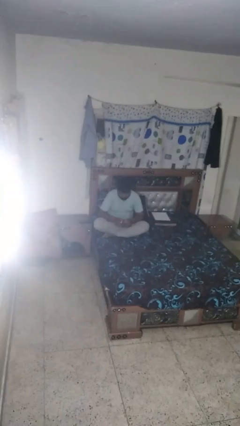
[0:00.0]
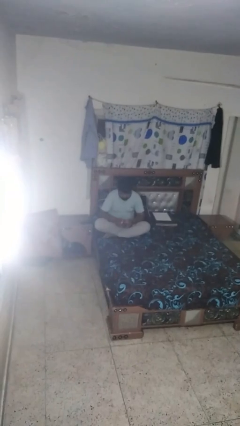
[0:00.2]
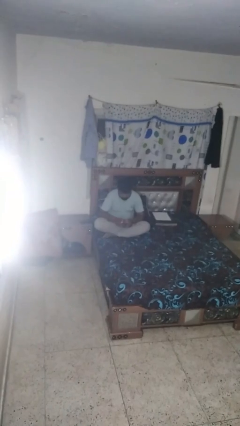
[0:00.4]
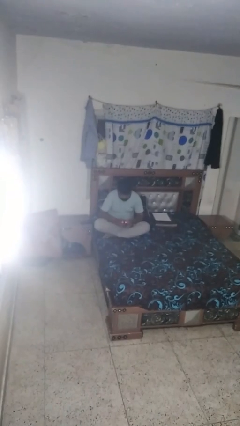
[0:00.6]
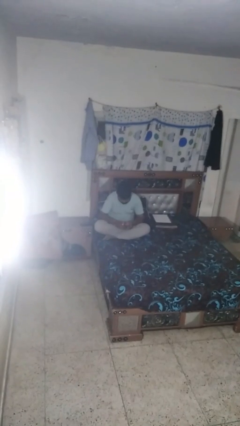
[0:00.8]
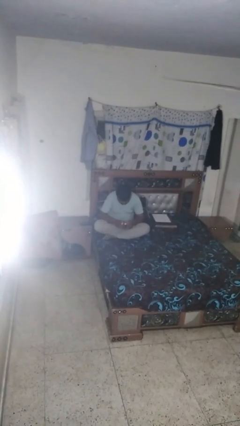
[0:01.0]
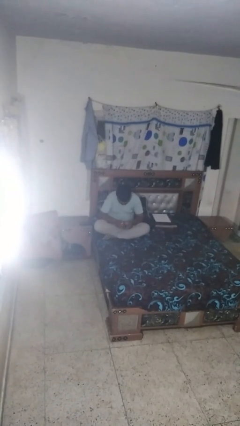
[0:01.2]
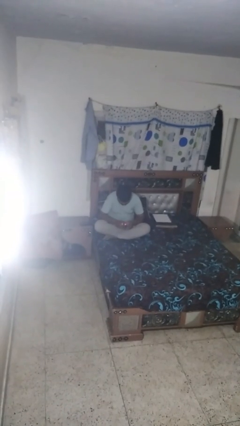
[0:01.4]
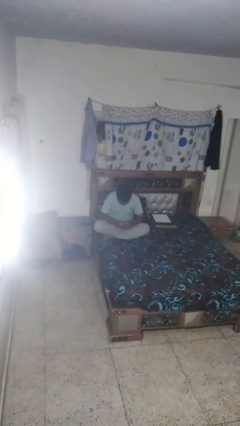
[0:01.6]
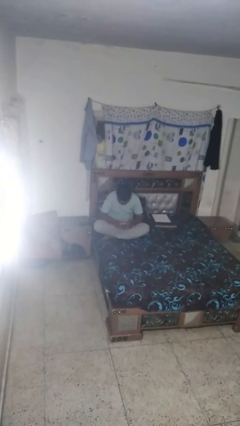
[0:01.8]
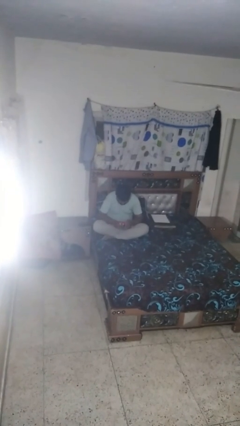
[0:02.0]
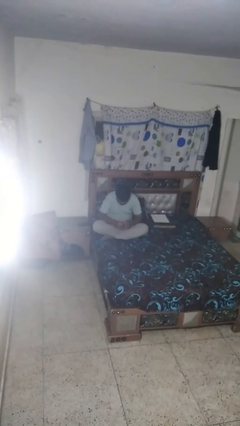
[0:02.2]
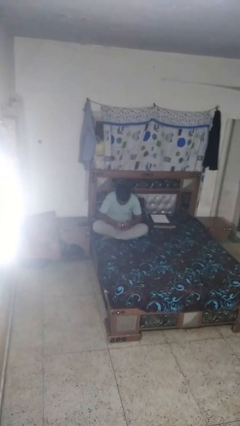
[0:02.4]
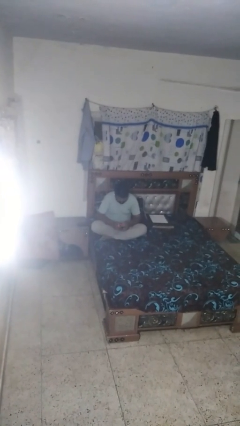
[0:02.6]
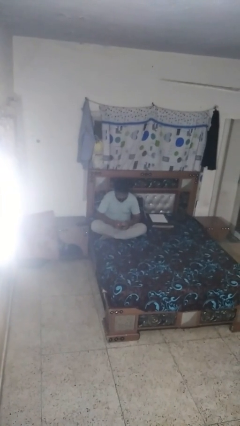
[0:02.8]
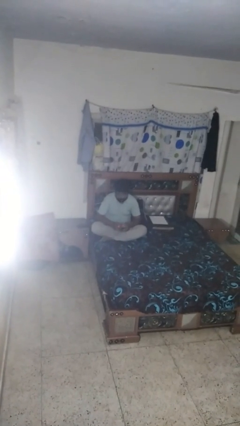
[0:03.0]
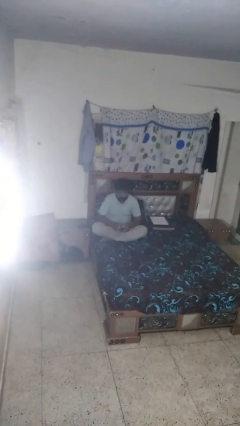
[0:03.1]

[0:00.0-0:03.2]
person interacts with handheld game

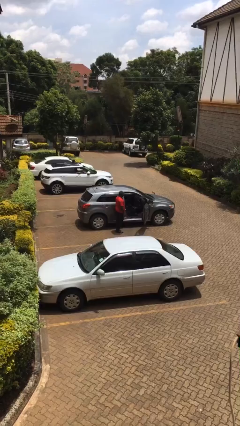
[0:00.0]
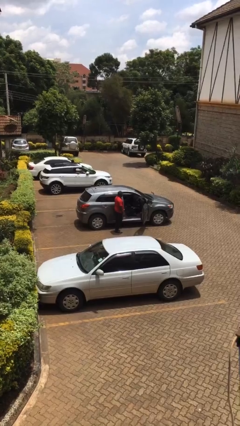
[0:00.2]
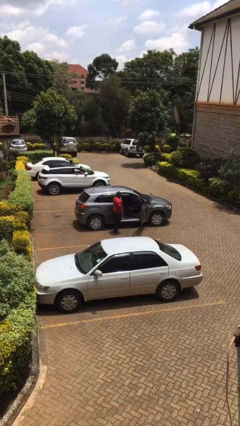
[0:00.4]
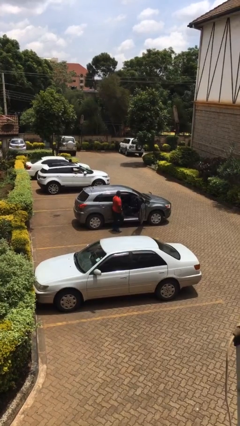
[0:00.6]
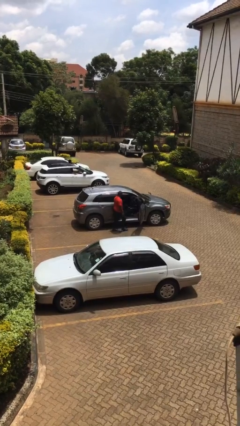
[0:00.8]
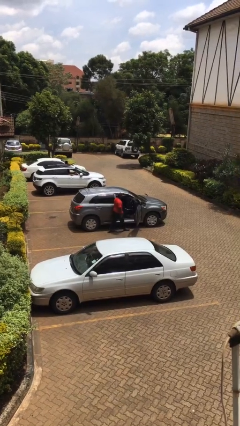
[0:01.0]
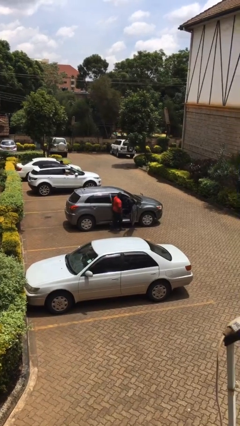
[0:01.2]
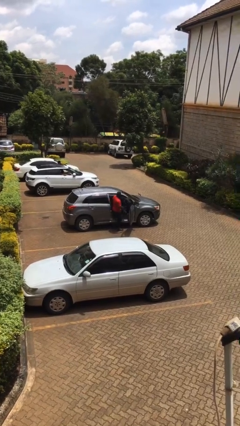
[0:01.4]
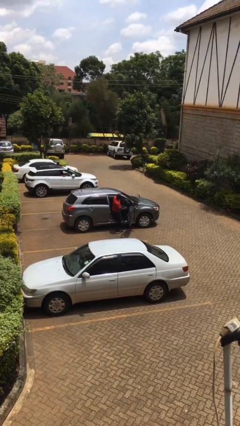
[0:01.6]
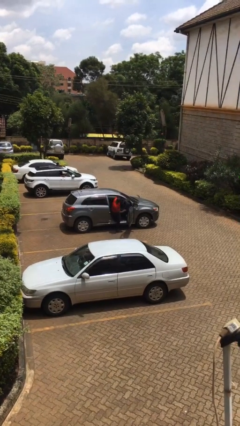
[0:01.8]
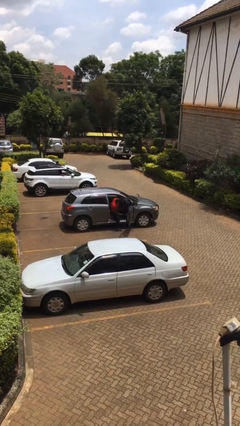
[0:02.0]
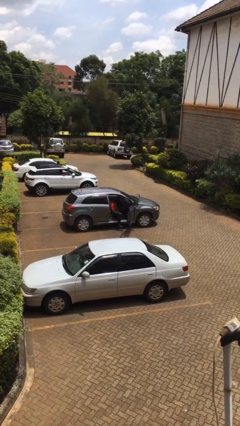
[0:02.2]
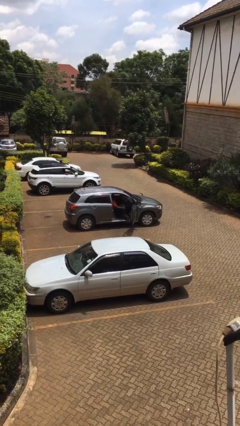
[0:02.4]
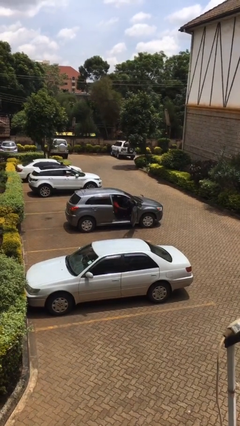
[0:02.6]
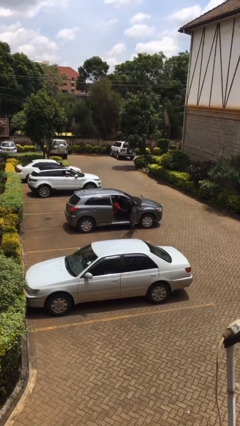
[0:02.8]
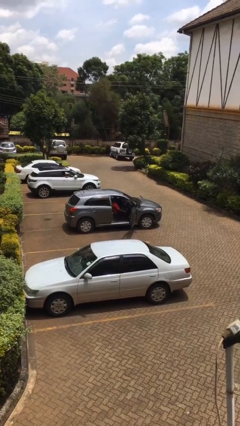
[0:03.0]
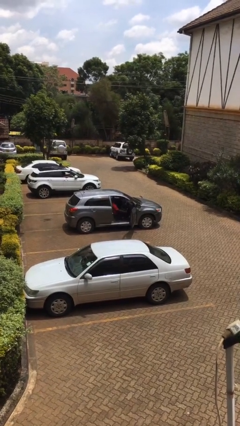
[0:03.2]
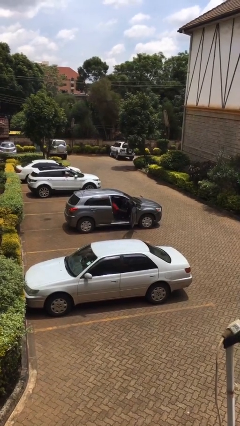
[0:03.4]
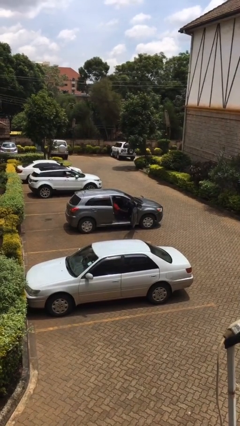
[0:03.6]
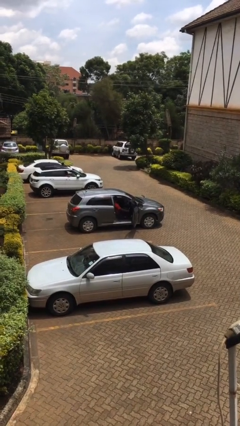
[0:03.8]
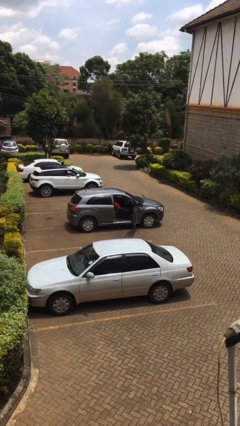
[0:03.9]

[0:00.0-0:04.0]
person enters car

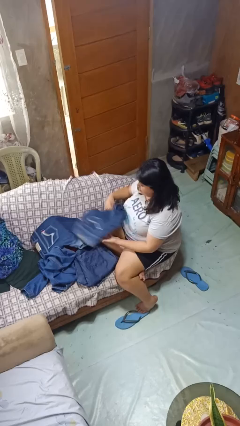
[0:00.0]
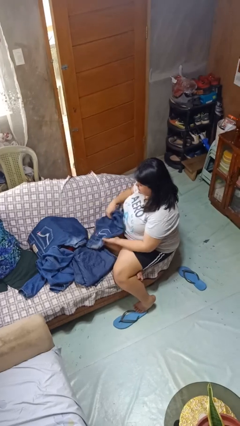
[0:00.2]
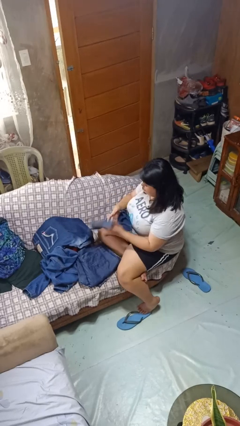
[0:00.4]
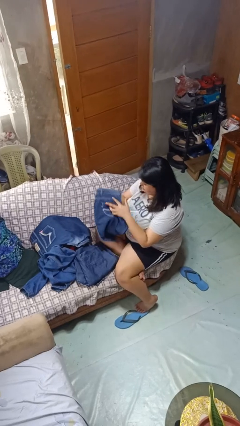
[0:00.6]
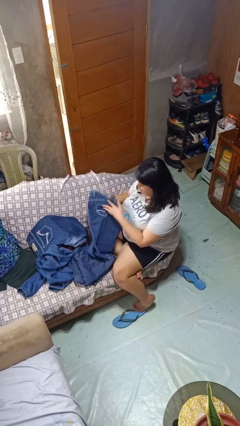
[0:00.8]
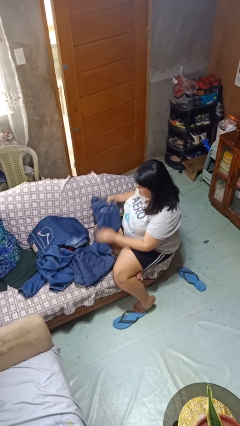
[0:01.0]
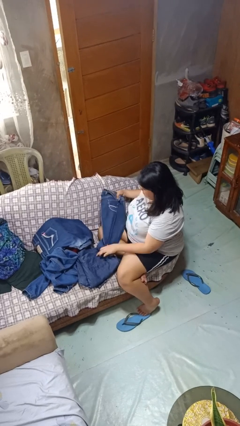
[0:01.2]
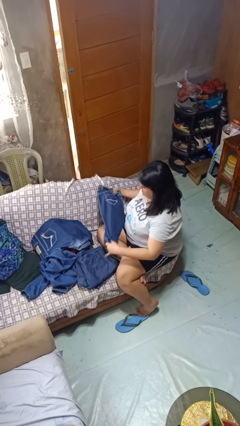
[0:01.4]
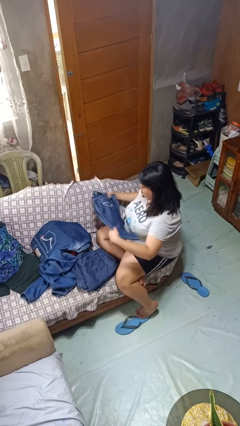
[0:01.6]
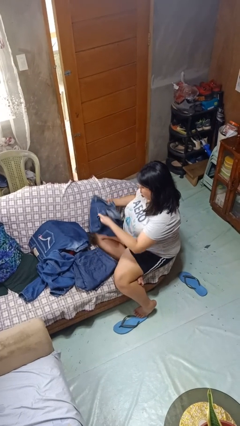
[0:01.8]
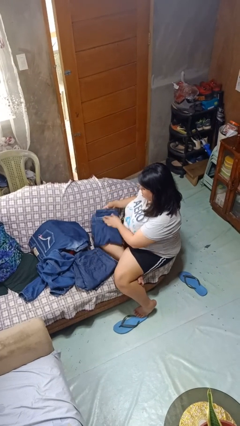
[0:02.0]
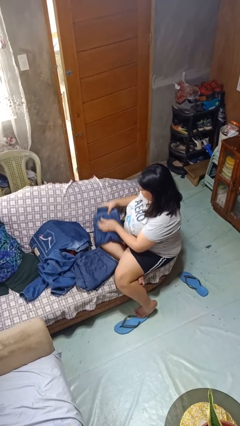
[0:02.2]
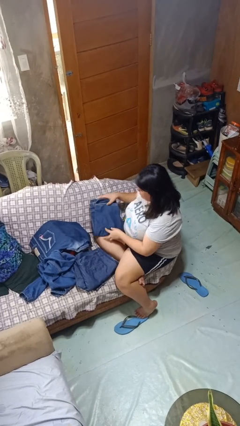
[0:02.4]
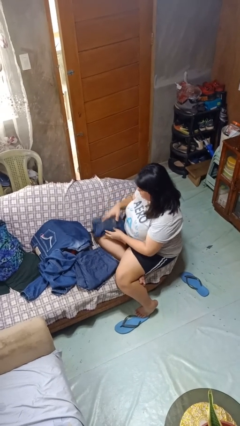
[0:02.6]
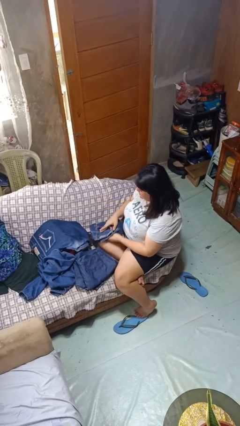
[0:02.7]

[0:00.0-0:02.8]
person folds pants

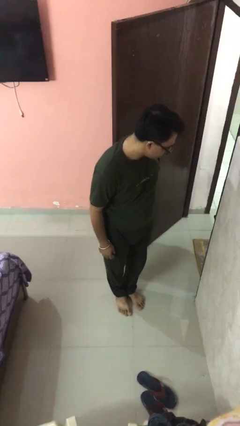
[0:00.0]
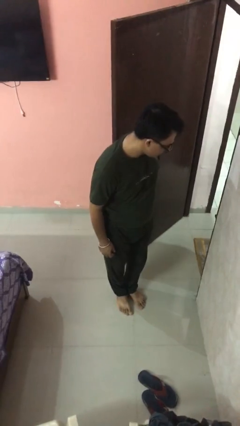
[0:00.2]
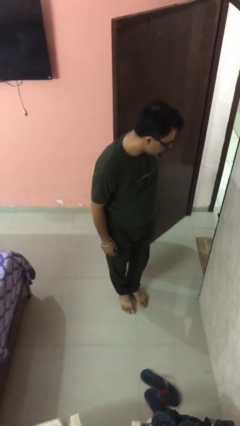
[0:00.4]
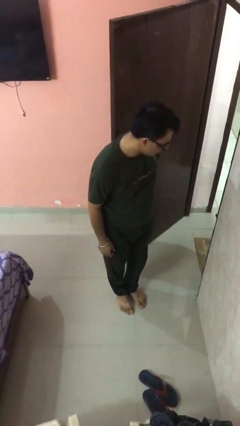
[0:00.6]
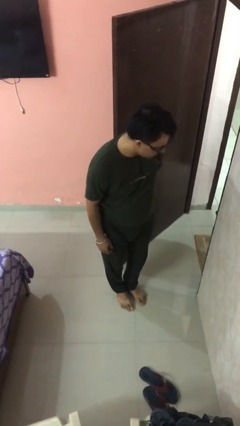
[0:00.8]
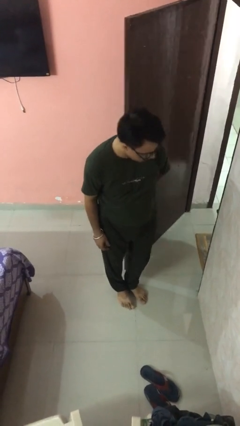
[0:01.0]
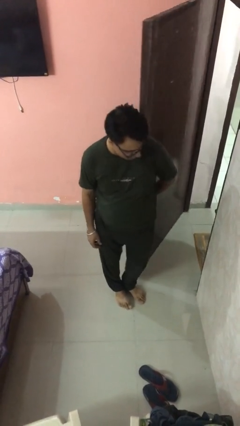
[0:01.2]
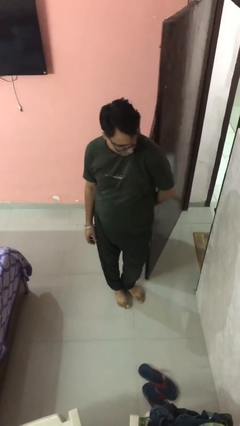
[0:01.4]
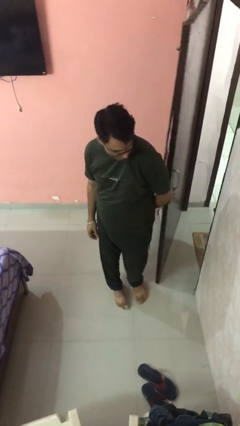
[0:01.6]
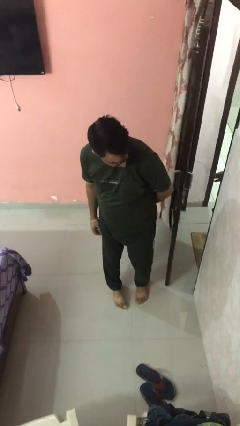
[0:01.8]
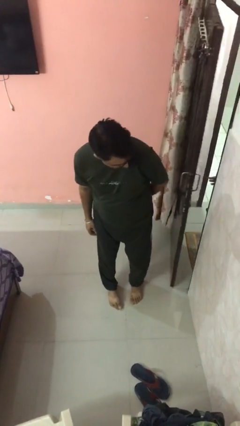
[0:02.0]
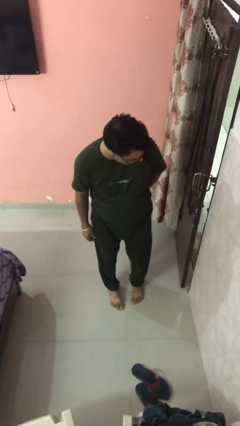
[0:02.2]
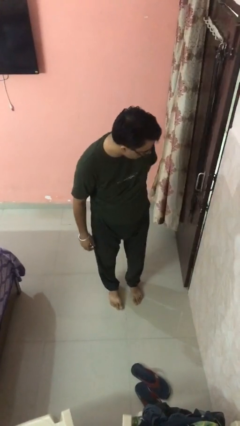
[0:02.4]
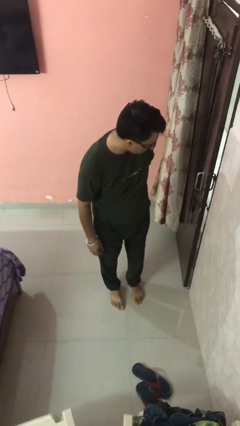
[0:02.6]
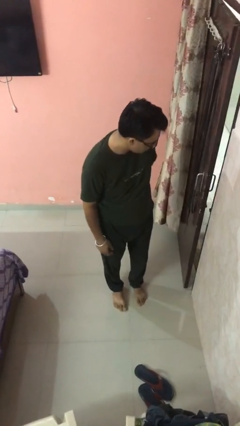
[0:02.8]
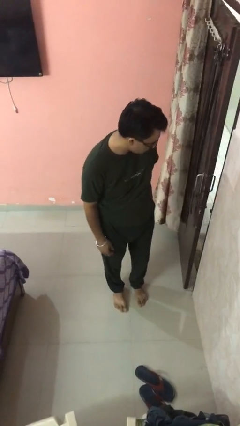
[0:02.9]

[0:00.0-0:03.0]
person closes door with hip

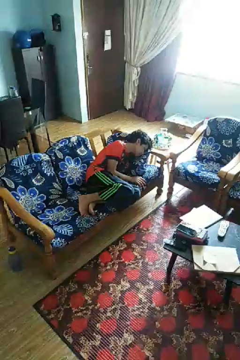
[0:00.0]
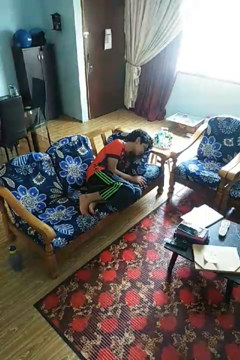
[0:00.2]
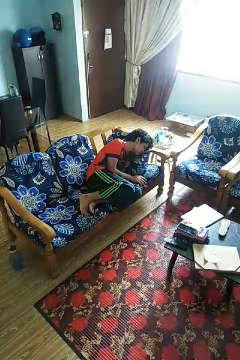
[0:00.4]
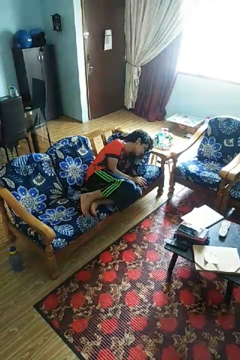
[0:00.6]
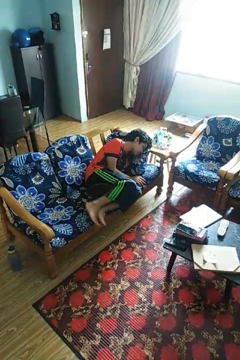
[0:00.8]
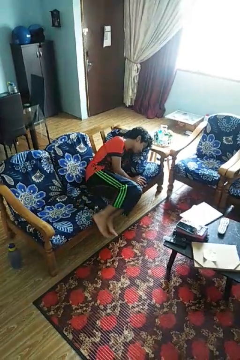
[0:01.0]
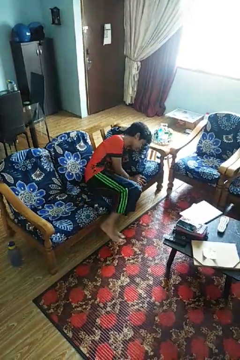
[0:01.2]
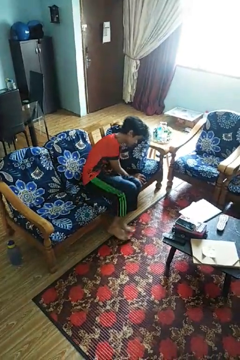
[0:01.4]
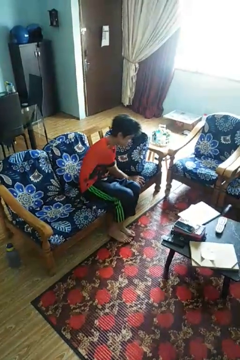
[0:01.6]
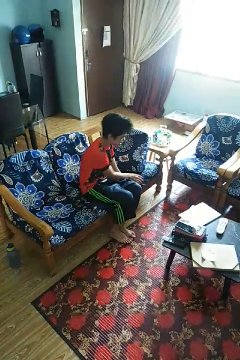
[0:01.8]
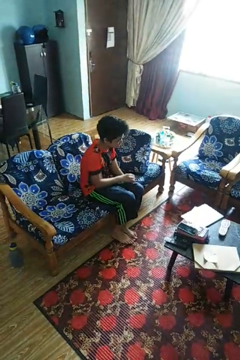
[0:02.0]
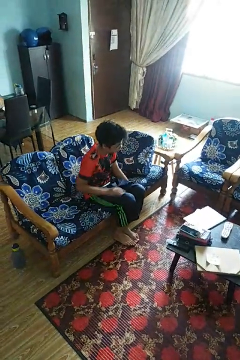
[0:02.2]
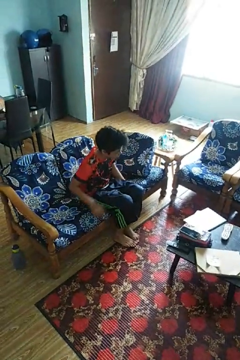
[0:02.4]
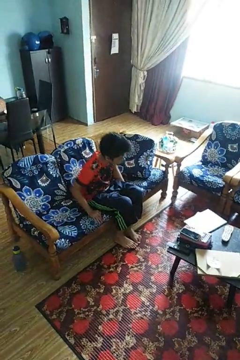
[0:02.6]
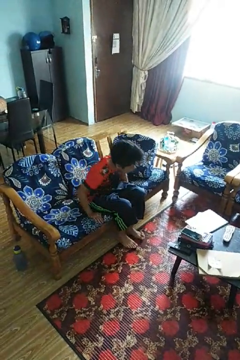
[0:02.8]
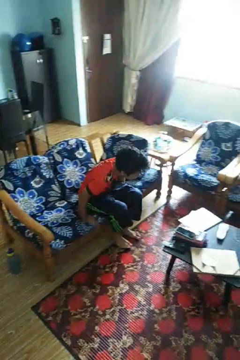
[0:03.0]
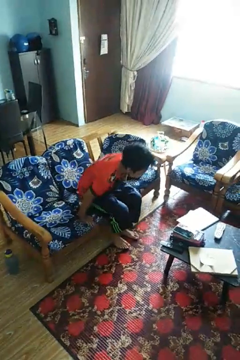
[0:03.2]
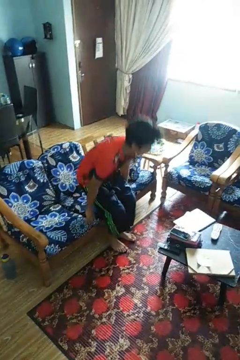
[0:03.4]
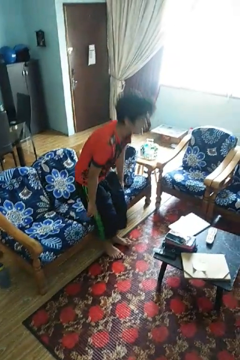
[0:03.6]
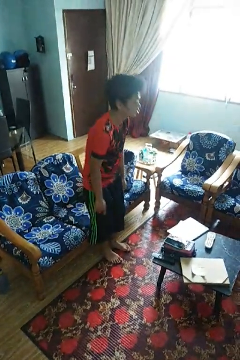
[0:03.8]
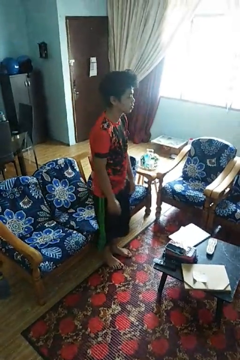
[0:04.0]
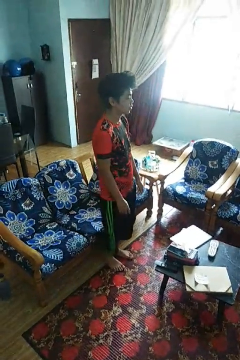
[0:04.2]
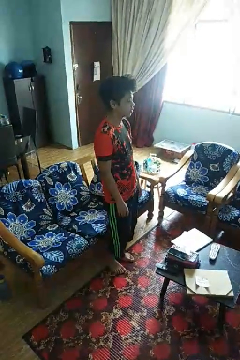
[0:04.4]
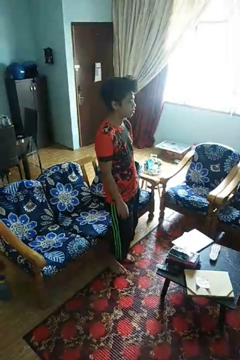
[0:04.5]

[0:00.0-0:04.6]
person stands up

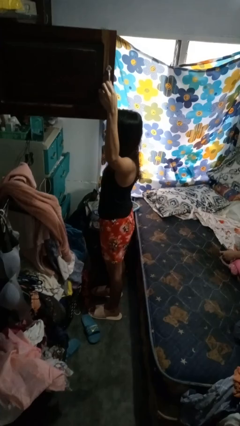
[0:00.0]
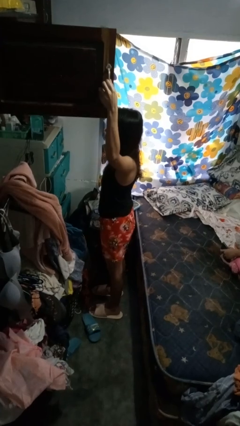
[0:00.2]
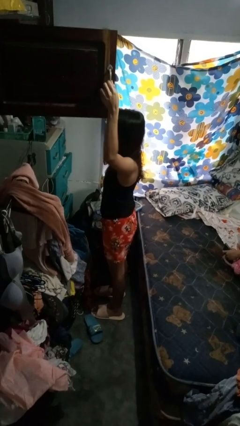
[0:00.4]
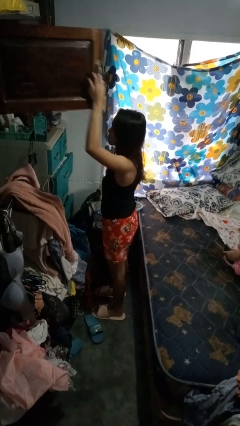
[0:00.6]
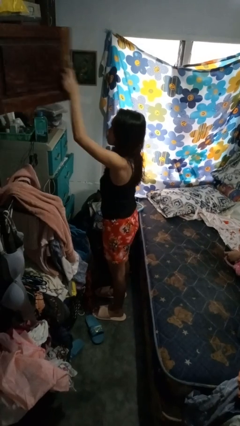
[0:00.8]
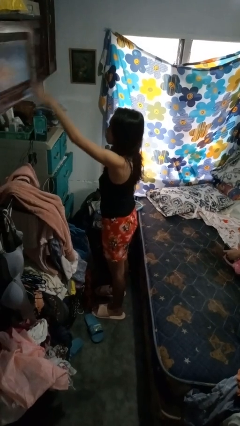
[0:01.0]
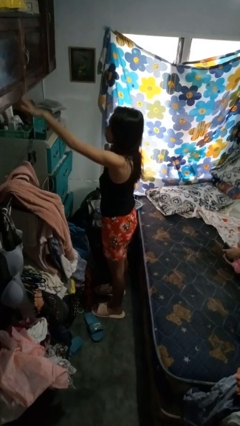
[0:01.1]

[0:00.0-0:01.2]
person closes closet door
